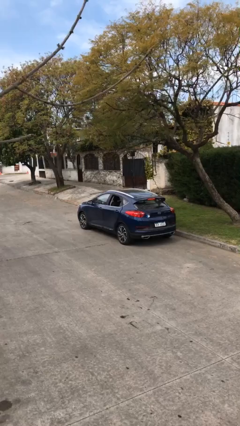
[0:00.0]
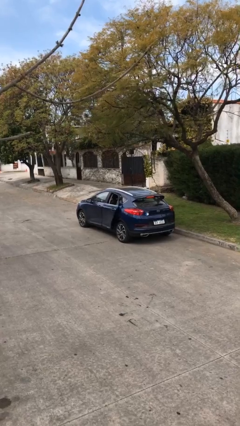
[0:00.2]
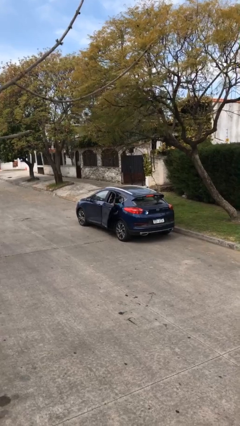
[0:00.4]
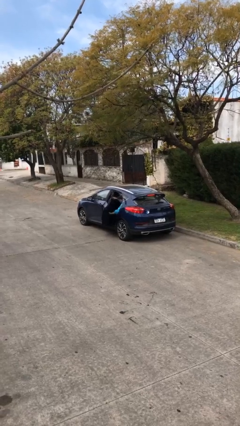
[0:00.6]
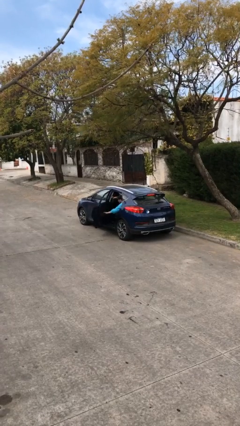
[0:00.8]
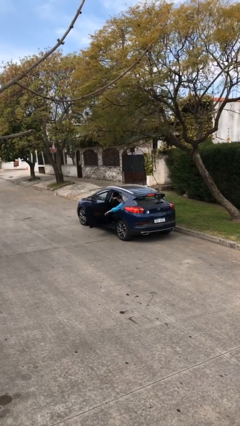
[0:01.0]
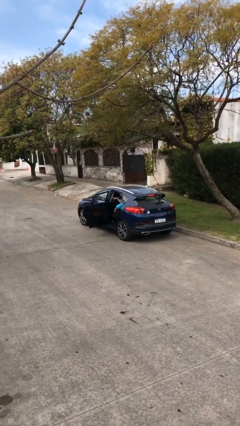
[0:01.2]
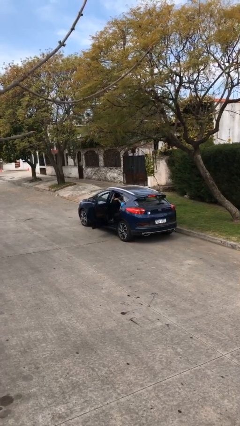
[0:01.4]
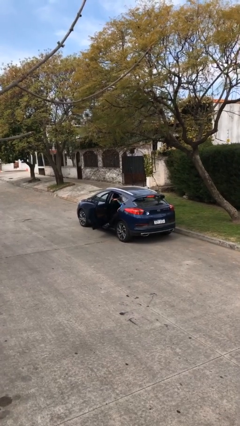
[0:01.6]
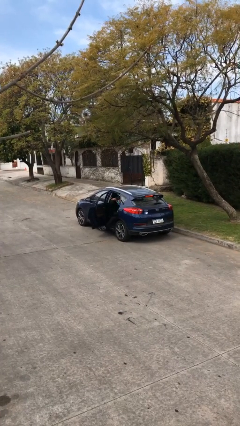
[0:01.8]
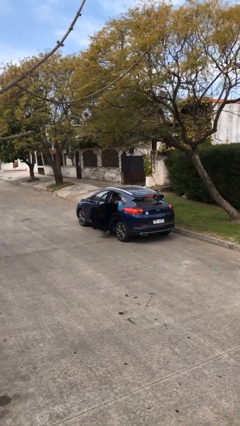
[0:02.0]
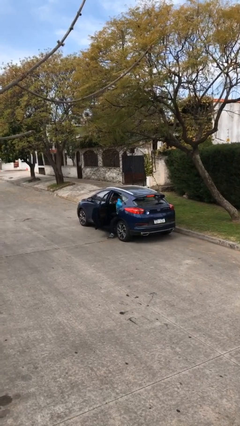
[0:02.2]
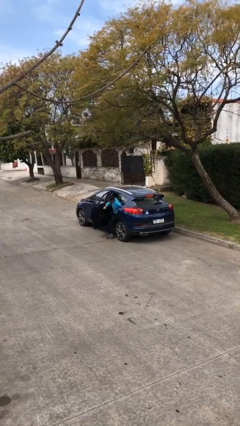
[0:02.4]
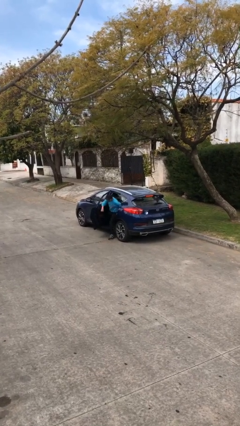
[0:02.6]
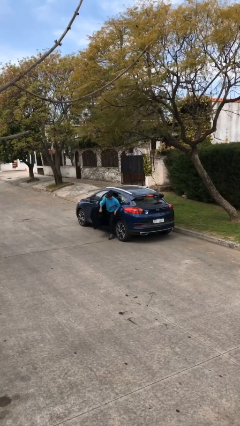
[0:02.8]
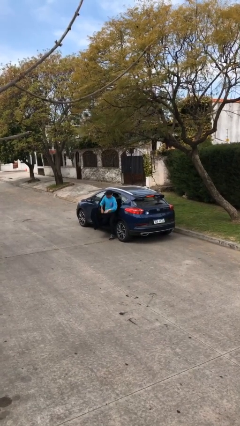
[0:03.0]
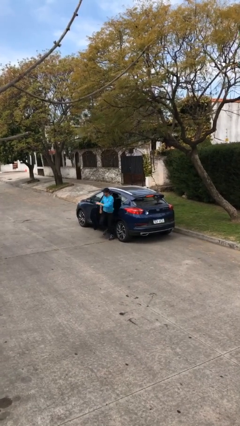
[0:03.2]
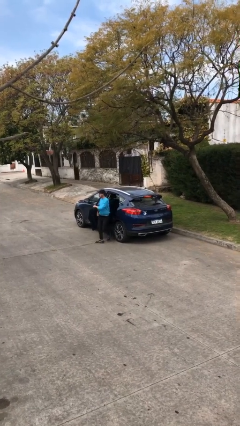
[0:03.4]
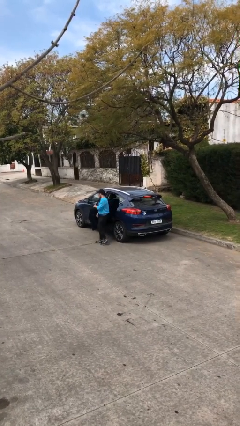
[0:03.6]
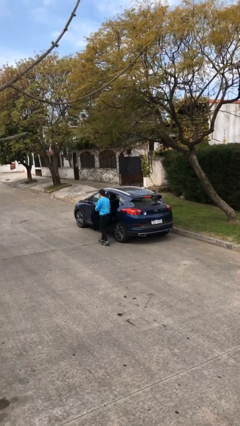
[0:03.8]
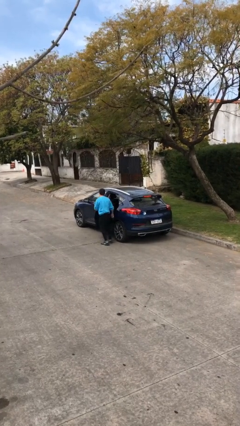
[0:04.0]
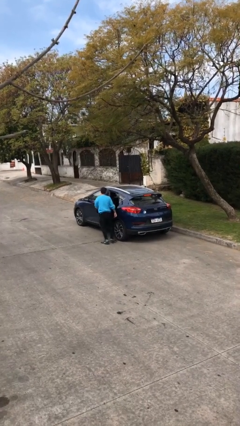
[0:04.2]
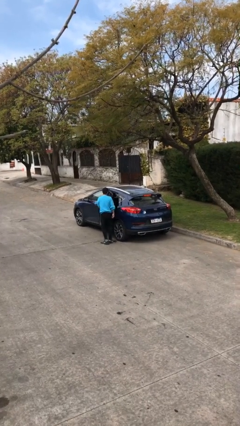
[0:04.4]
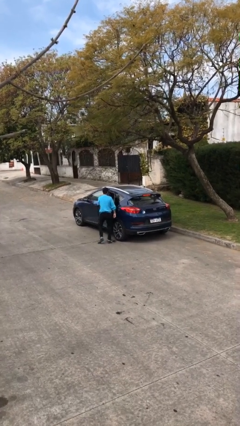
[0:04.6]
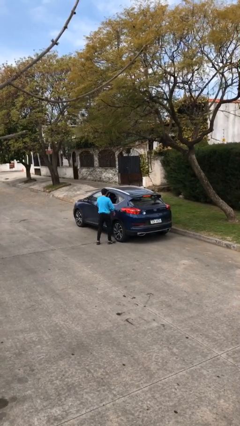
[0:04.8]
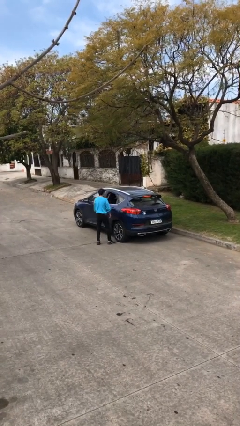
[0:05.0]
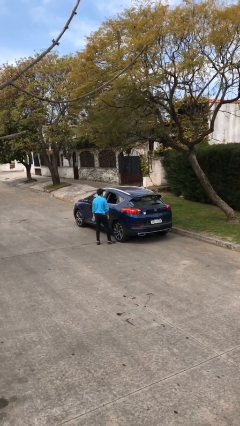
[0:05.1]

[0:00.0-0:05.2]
car drops off person

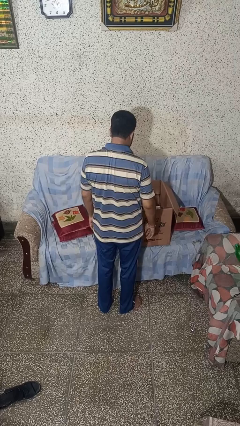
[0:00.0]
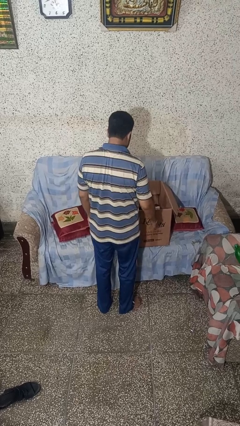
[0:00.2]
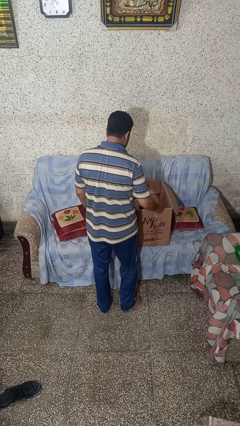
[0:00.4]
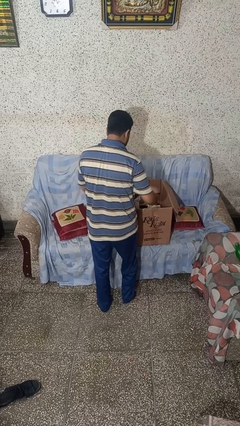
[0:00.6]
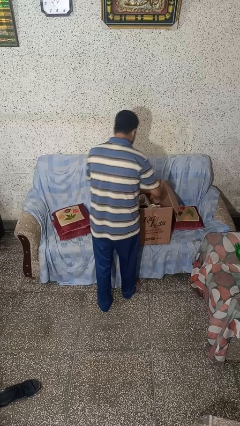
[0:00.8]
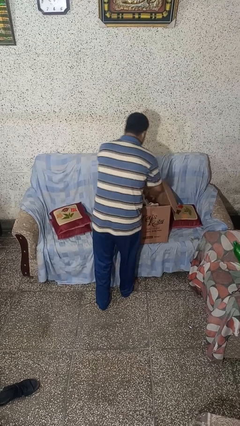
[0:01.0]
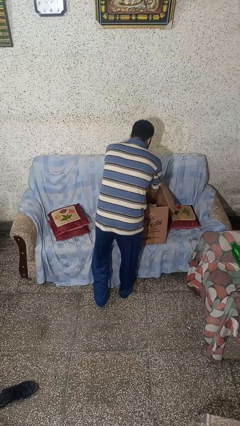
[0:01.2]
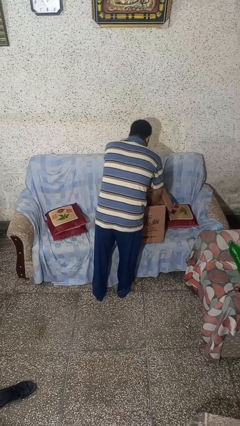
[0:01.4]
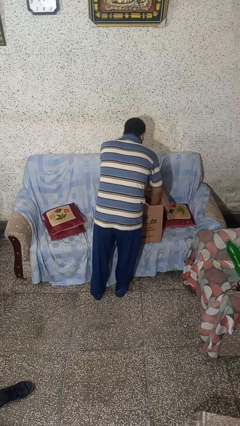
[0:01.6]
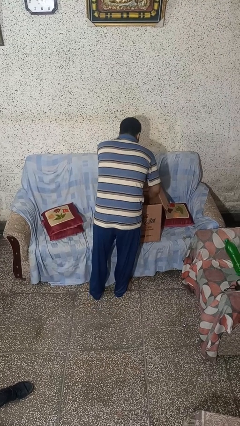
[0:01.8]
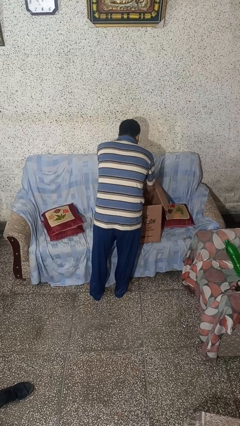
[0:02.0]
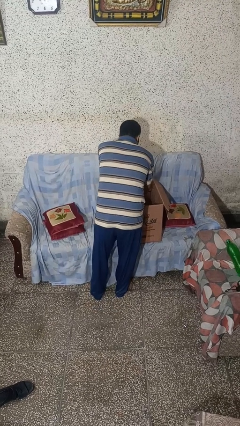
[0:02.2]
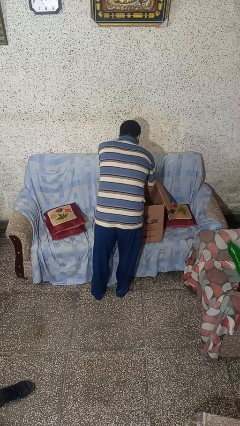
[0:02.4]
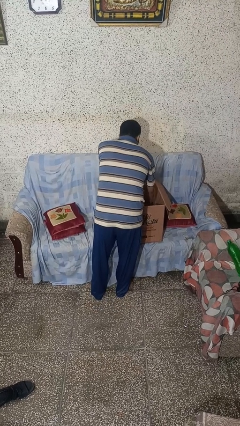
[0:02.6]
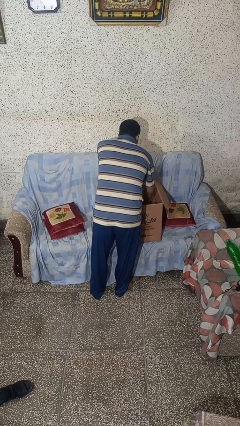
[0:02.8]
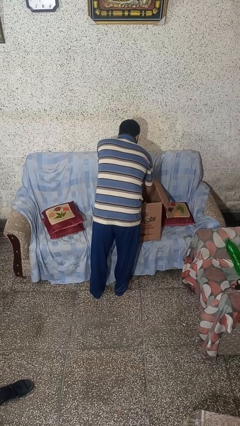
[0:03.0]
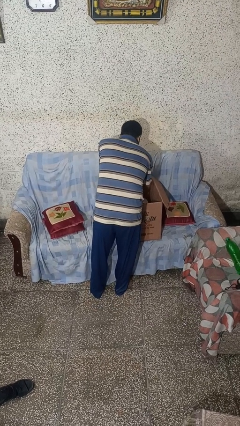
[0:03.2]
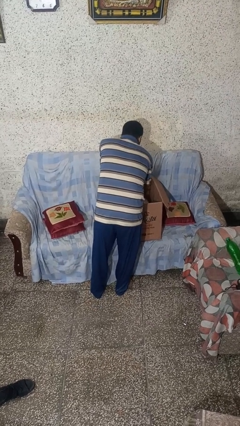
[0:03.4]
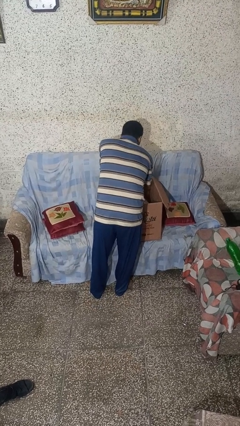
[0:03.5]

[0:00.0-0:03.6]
person searches in box

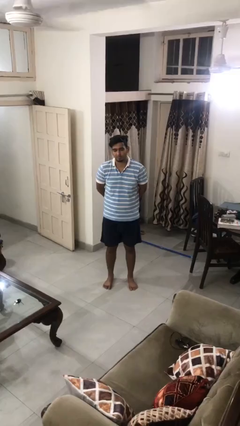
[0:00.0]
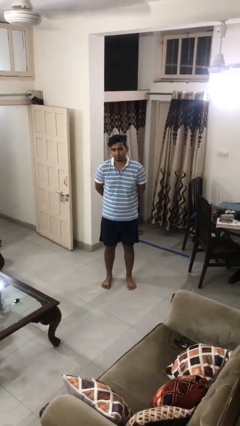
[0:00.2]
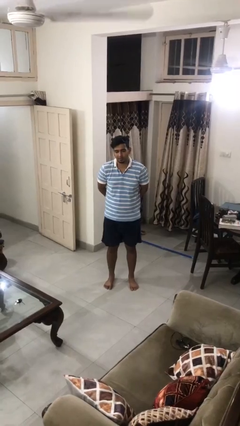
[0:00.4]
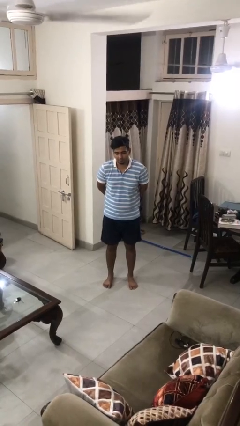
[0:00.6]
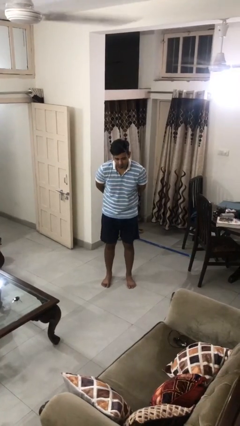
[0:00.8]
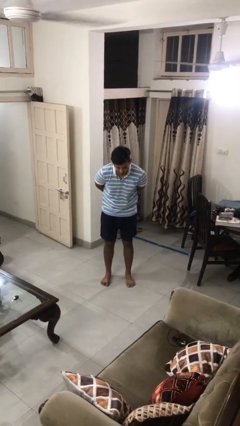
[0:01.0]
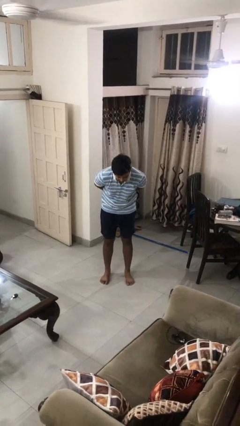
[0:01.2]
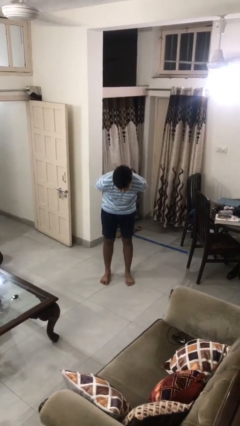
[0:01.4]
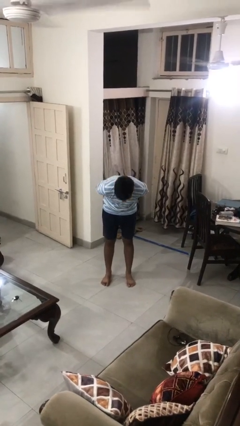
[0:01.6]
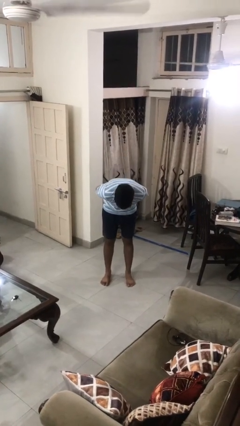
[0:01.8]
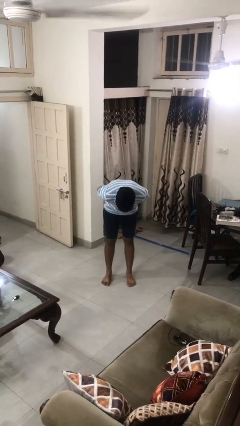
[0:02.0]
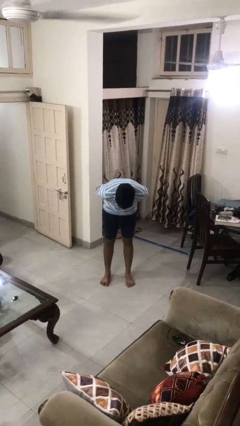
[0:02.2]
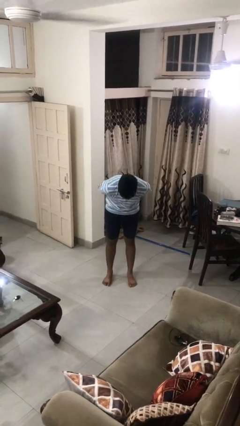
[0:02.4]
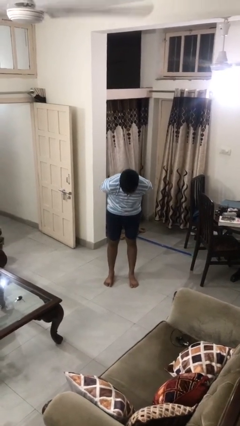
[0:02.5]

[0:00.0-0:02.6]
person bows

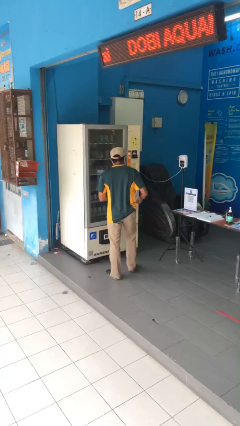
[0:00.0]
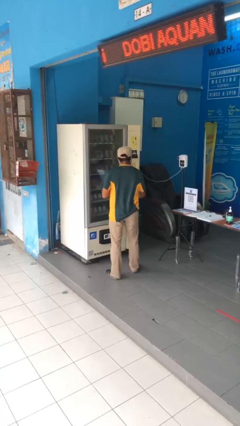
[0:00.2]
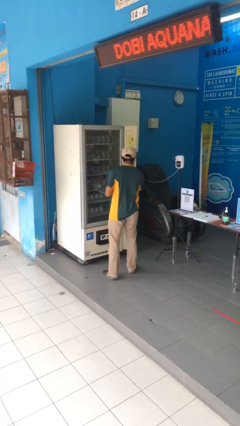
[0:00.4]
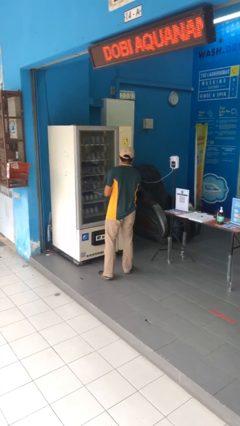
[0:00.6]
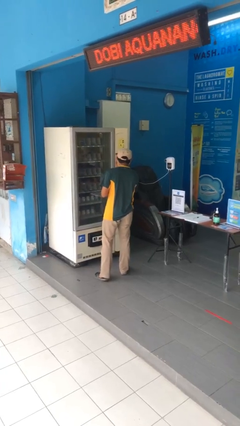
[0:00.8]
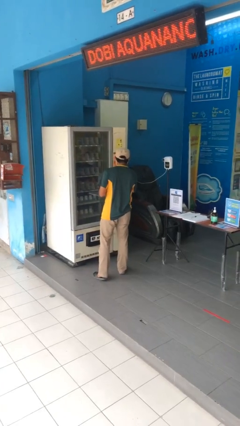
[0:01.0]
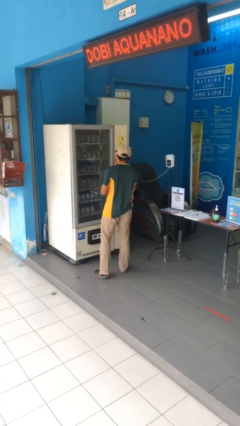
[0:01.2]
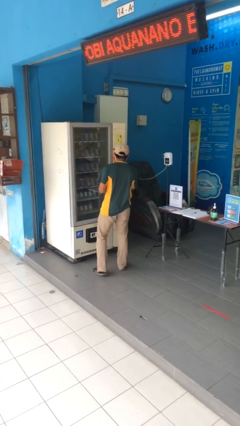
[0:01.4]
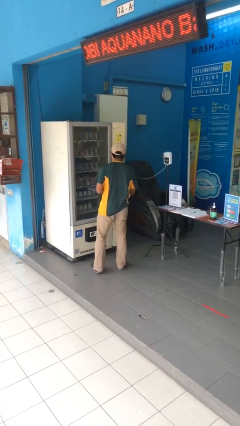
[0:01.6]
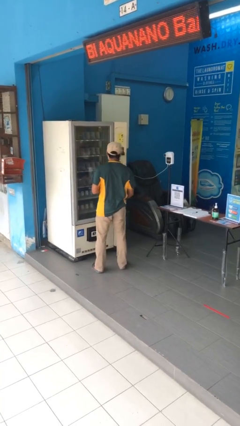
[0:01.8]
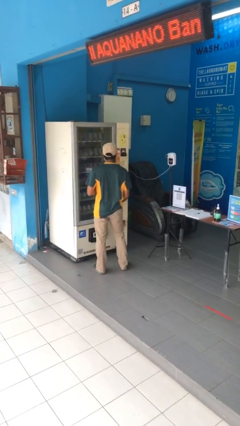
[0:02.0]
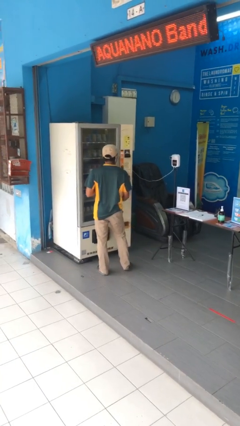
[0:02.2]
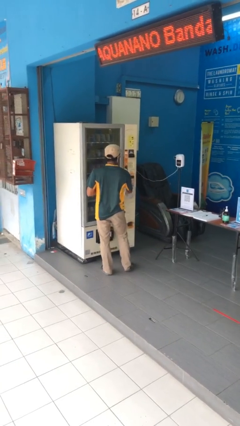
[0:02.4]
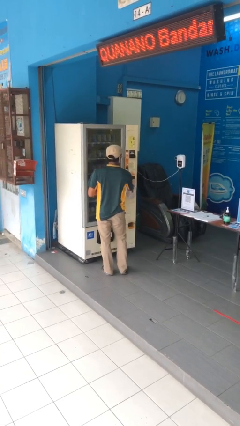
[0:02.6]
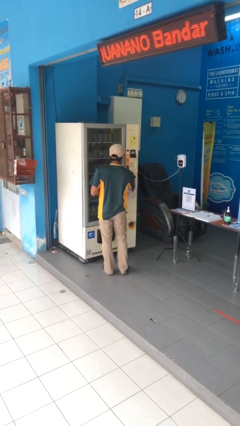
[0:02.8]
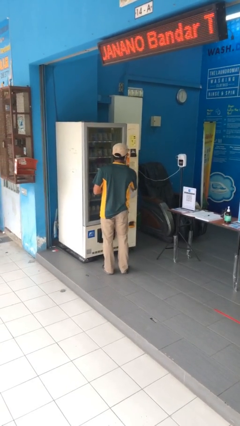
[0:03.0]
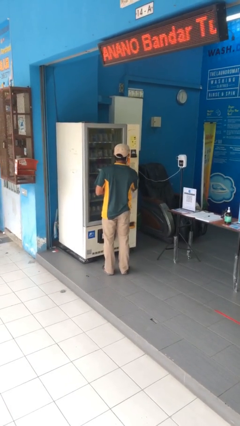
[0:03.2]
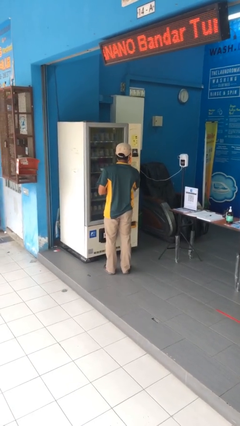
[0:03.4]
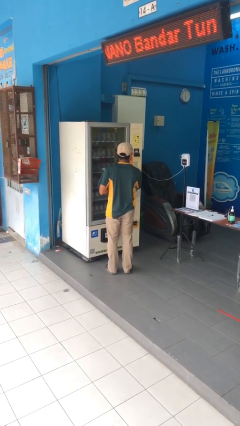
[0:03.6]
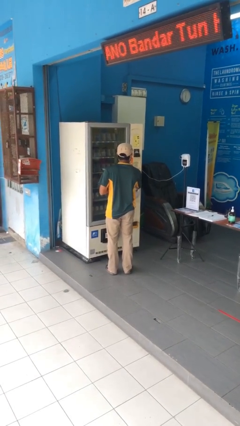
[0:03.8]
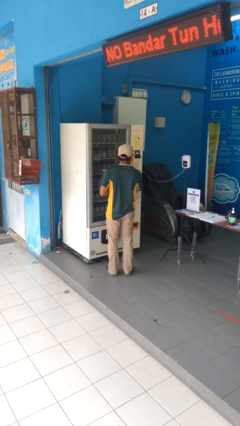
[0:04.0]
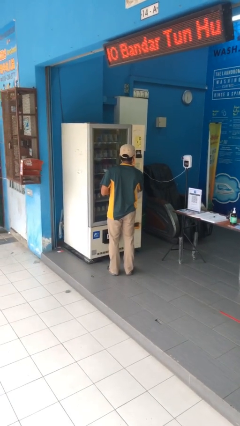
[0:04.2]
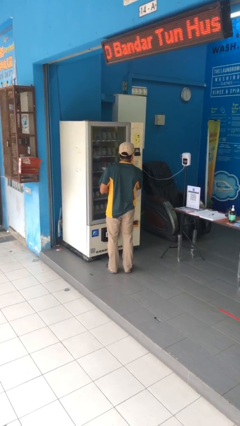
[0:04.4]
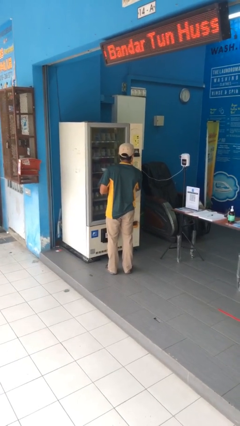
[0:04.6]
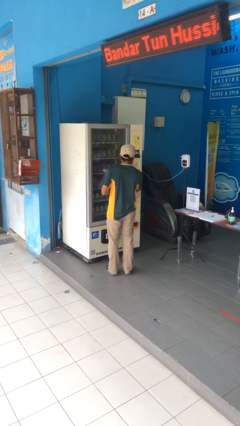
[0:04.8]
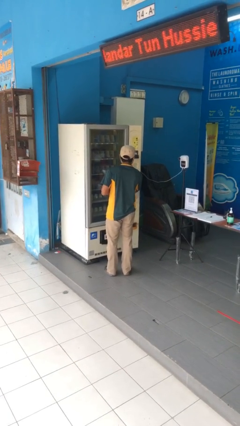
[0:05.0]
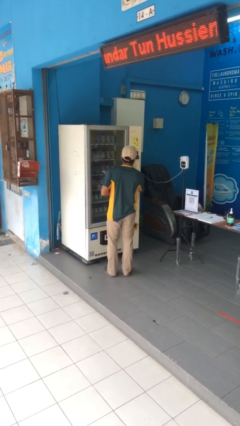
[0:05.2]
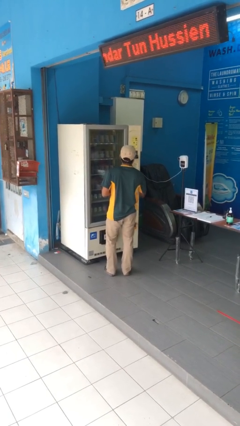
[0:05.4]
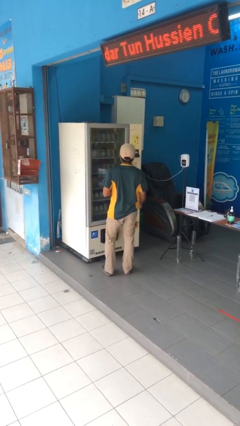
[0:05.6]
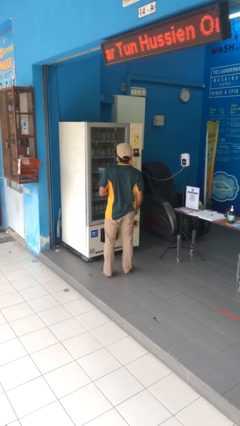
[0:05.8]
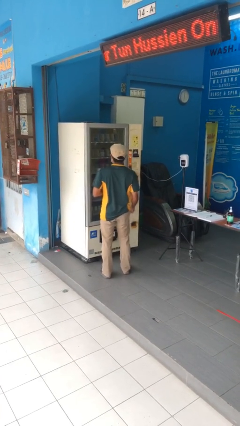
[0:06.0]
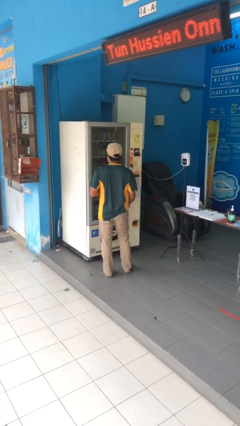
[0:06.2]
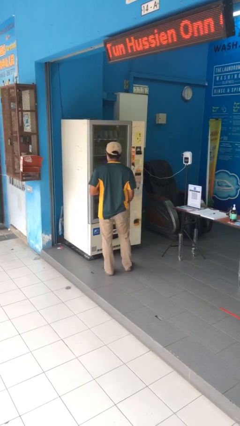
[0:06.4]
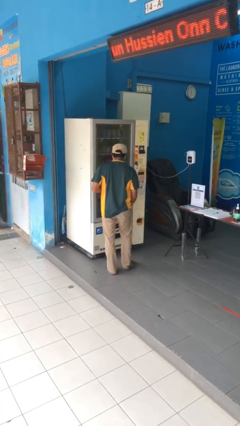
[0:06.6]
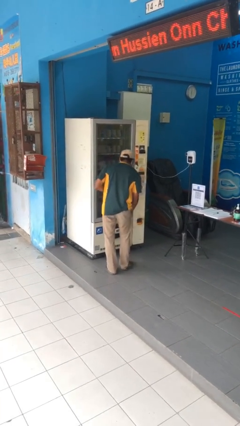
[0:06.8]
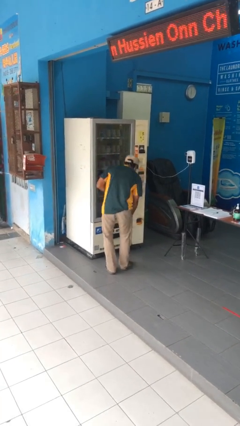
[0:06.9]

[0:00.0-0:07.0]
person purchases from machine
